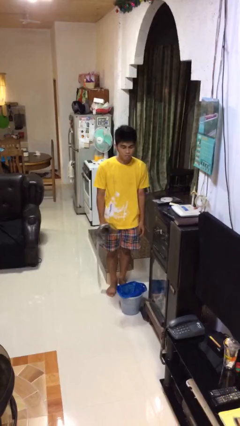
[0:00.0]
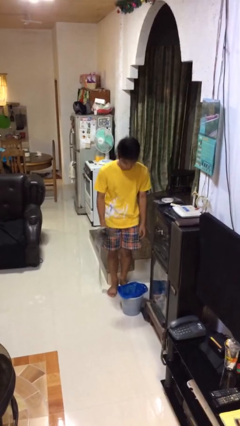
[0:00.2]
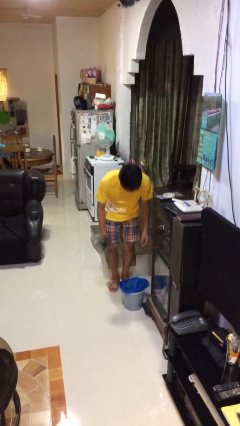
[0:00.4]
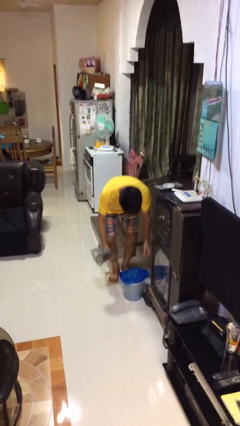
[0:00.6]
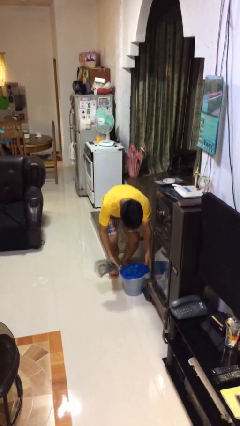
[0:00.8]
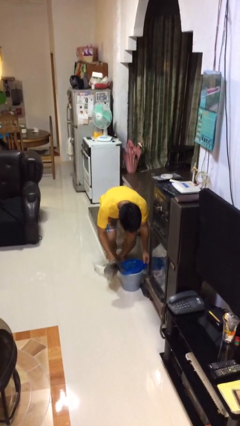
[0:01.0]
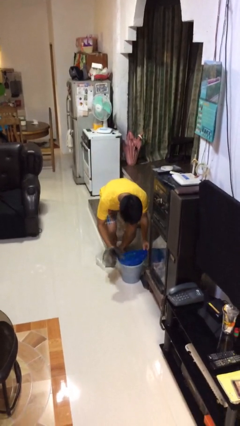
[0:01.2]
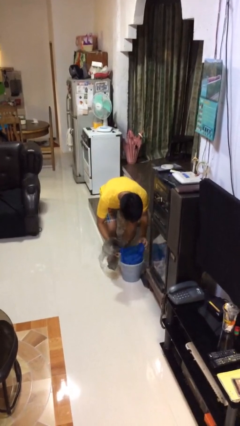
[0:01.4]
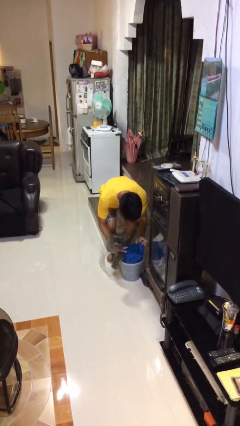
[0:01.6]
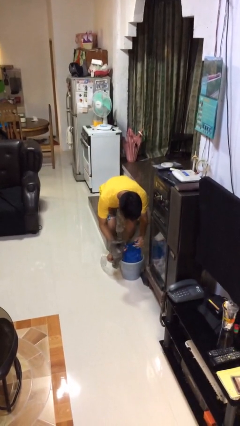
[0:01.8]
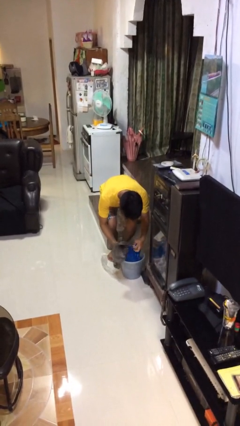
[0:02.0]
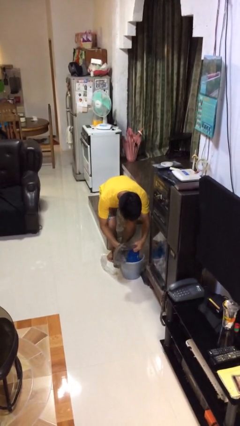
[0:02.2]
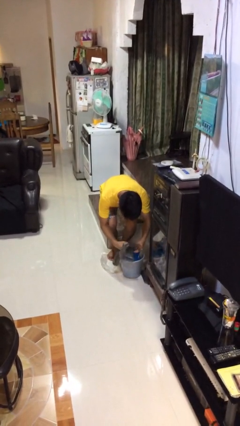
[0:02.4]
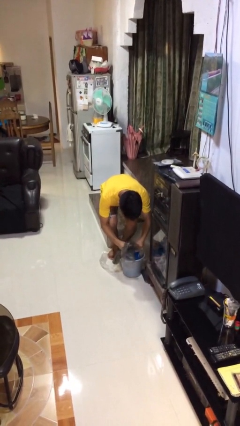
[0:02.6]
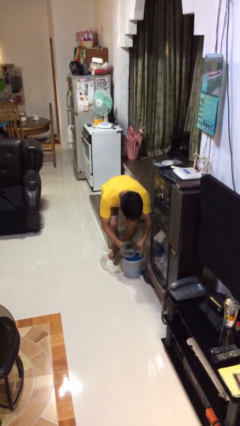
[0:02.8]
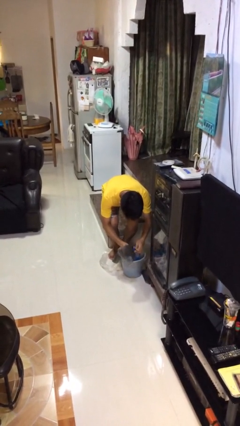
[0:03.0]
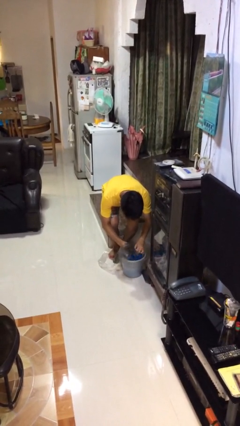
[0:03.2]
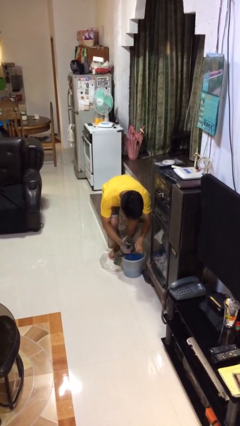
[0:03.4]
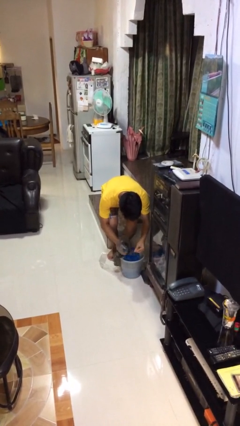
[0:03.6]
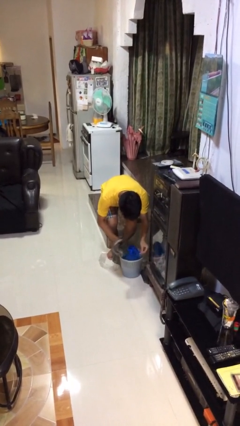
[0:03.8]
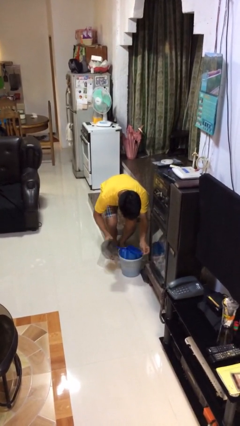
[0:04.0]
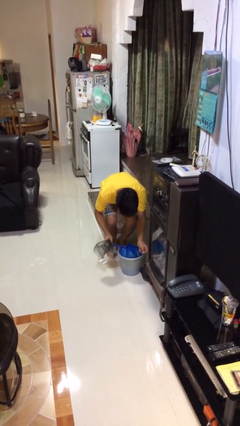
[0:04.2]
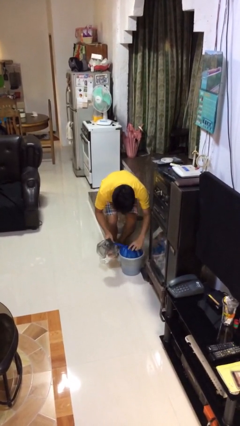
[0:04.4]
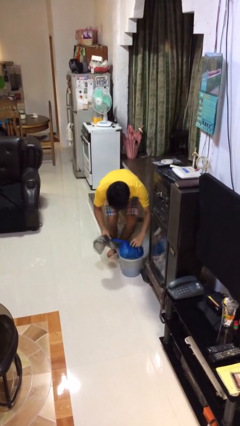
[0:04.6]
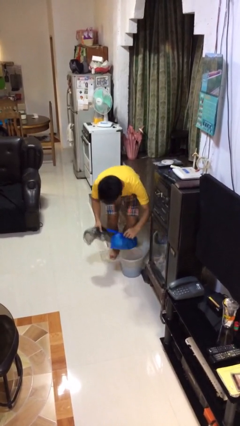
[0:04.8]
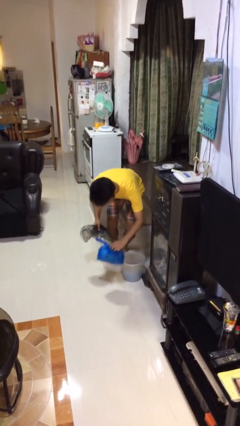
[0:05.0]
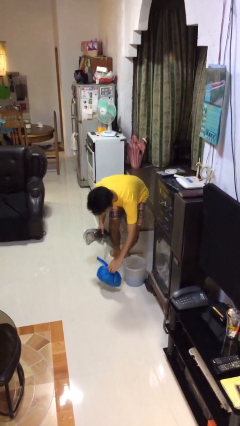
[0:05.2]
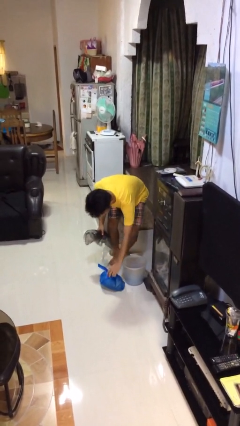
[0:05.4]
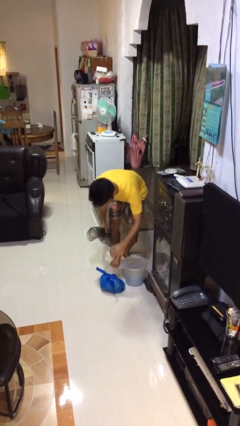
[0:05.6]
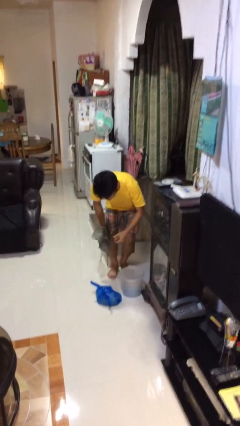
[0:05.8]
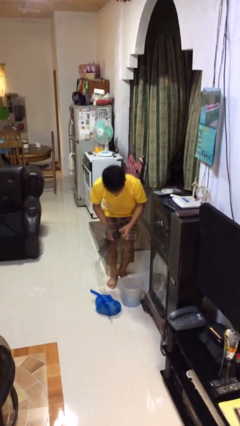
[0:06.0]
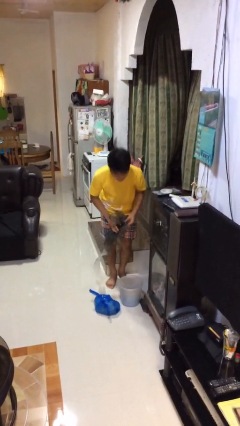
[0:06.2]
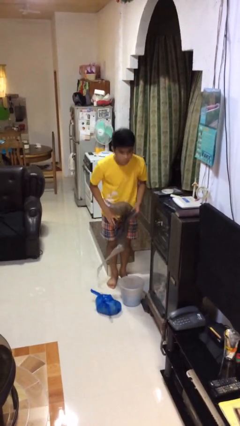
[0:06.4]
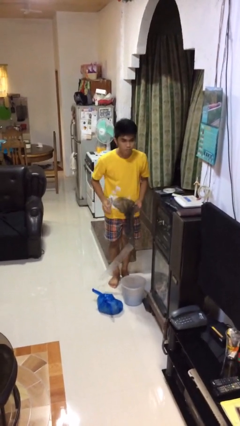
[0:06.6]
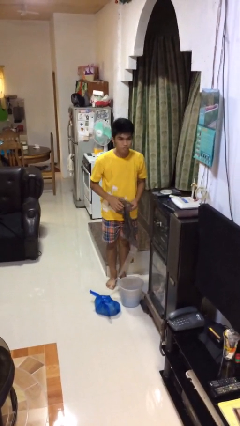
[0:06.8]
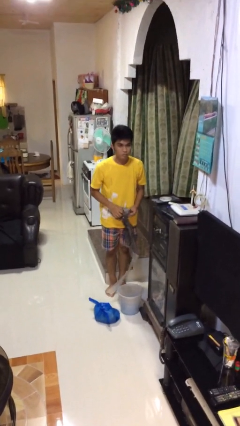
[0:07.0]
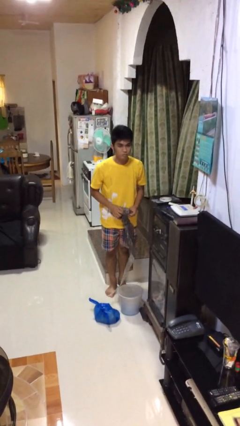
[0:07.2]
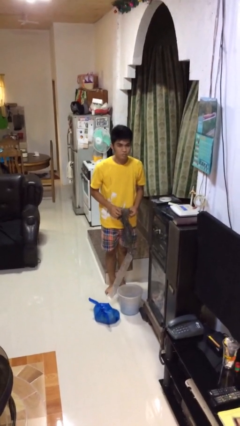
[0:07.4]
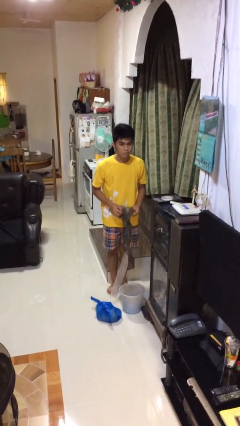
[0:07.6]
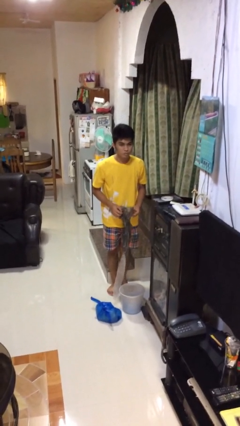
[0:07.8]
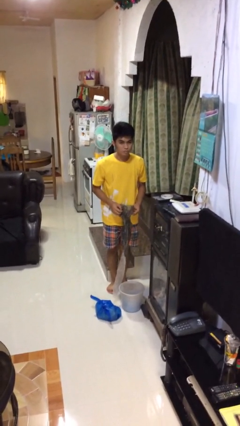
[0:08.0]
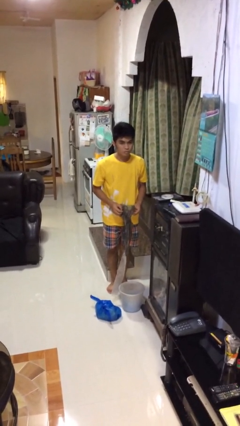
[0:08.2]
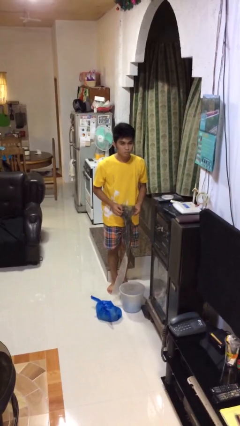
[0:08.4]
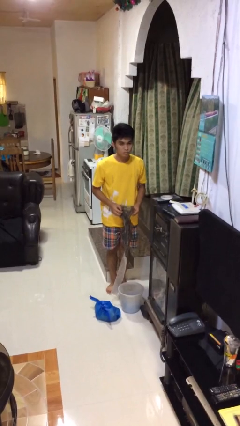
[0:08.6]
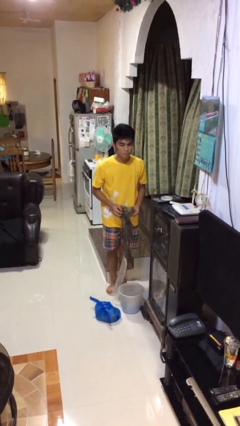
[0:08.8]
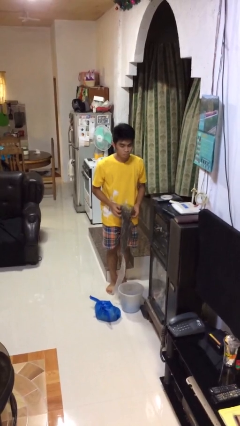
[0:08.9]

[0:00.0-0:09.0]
person removes trashbag from trashcan

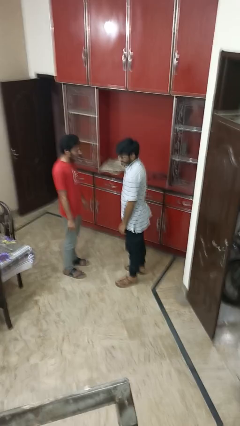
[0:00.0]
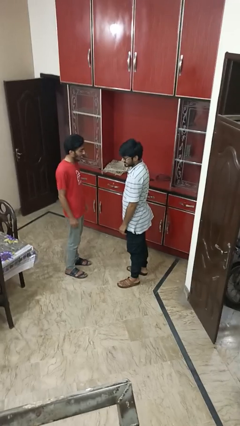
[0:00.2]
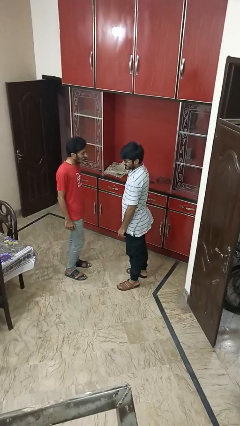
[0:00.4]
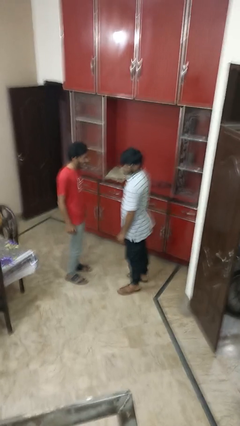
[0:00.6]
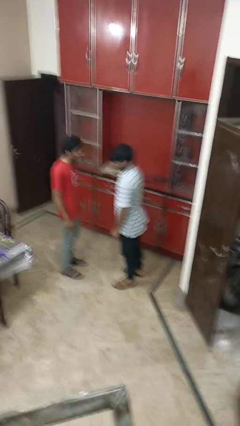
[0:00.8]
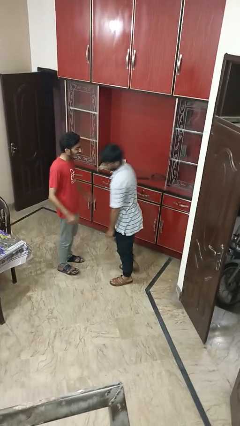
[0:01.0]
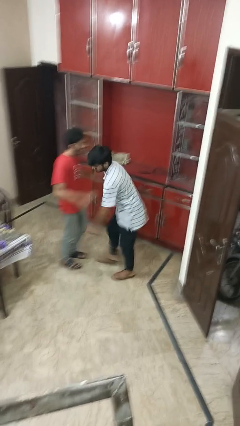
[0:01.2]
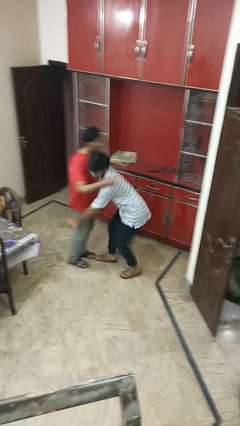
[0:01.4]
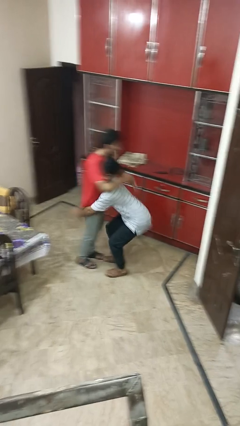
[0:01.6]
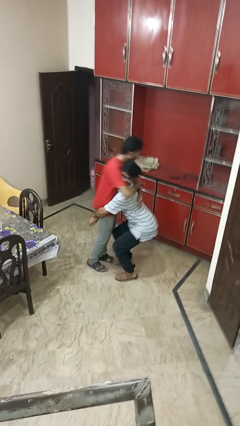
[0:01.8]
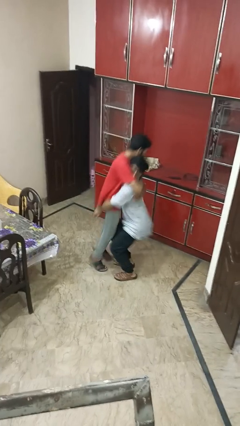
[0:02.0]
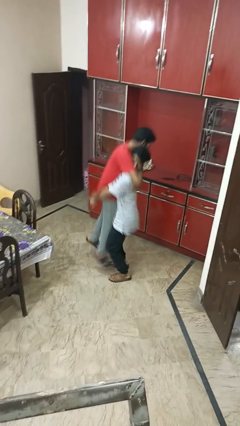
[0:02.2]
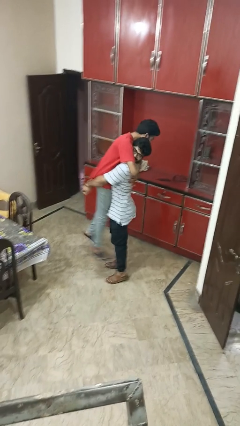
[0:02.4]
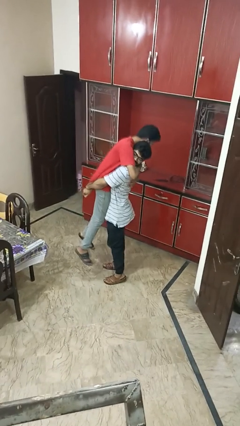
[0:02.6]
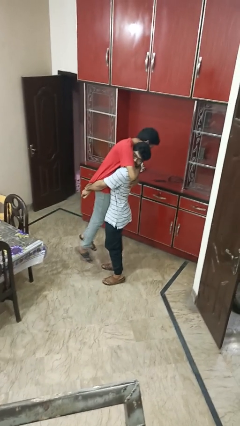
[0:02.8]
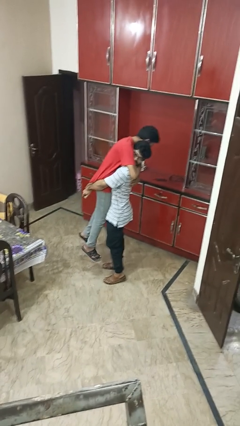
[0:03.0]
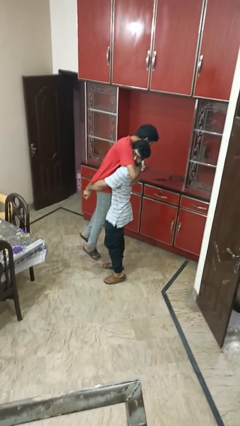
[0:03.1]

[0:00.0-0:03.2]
person picks up person

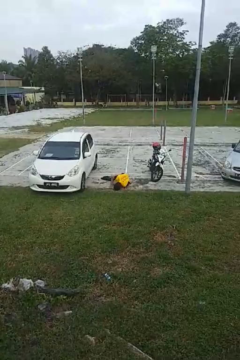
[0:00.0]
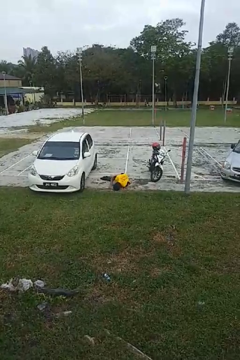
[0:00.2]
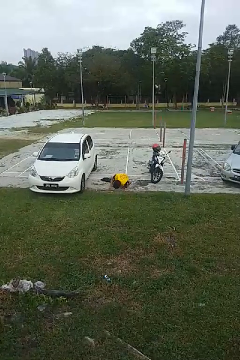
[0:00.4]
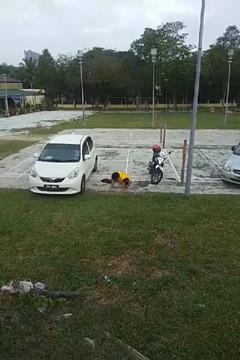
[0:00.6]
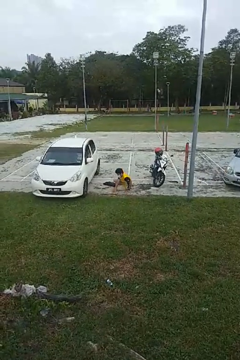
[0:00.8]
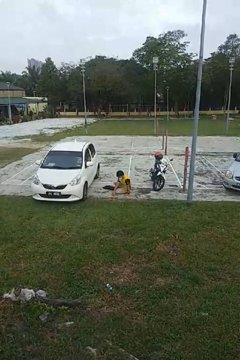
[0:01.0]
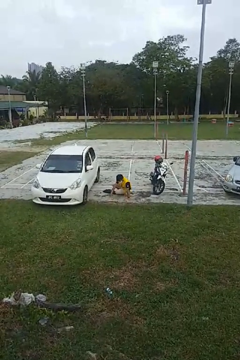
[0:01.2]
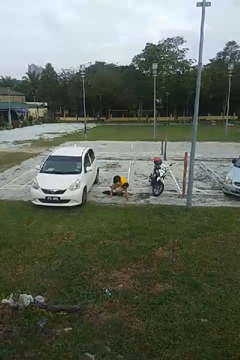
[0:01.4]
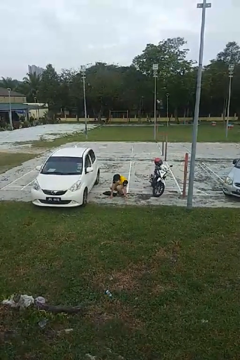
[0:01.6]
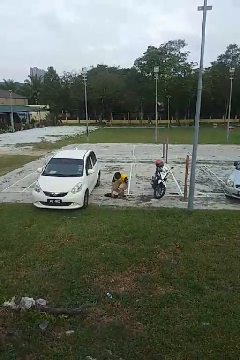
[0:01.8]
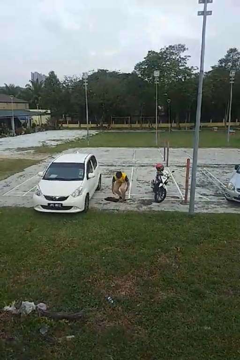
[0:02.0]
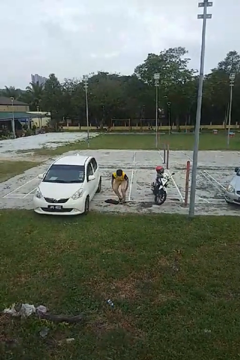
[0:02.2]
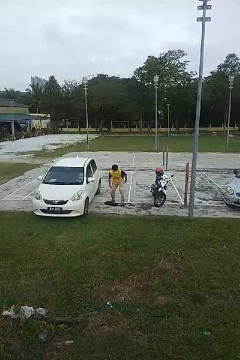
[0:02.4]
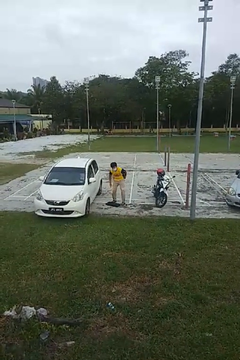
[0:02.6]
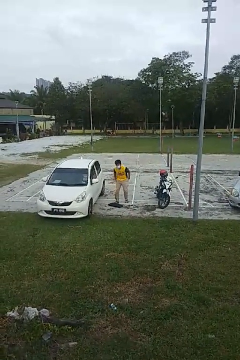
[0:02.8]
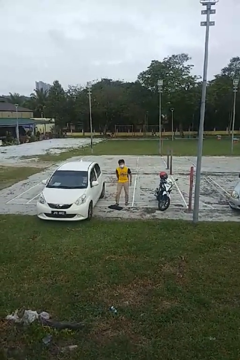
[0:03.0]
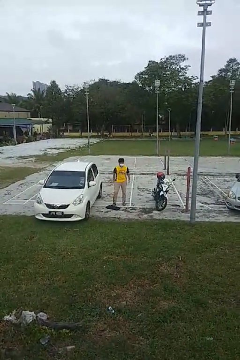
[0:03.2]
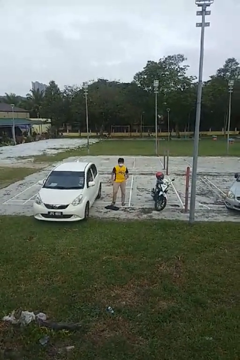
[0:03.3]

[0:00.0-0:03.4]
person stands up from floor

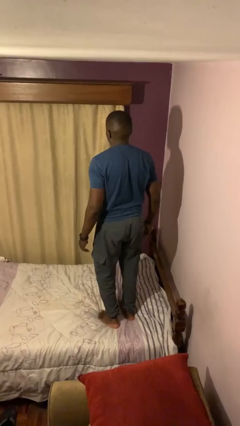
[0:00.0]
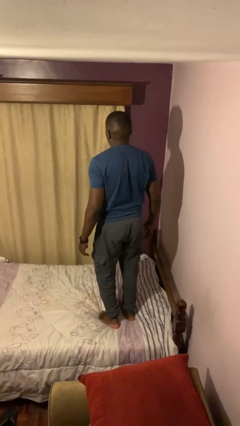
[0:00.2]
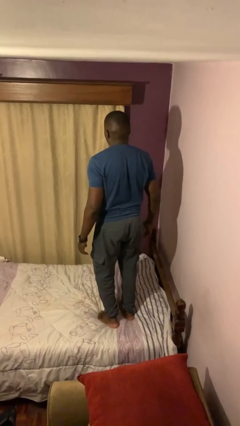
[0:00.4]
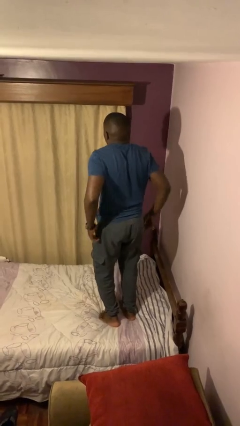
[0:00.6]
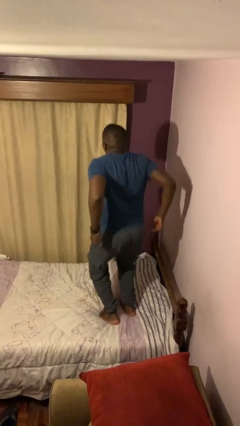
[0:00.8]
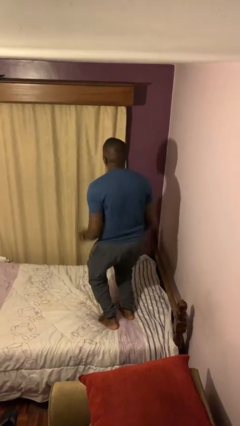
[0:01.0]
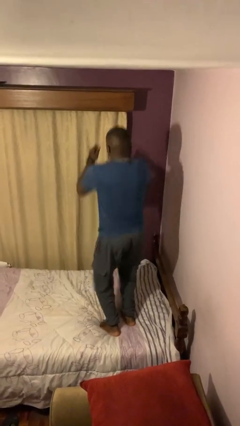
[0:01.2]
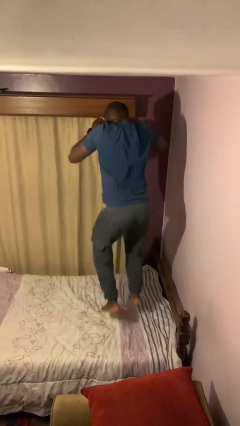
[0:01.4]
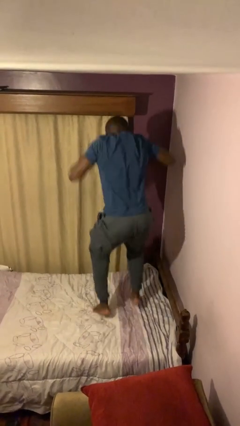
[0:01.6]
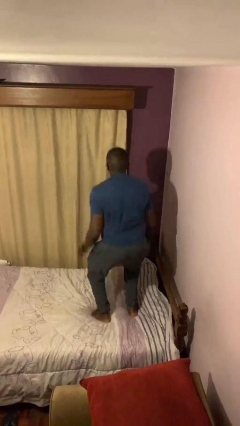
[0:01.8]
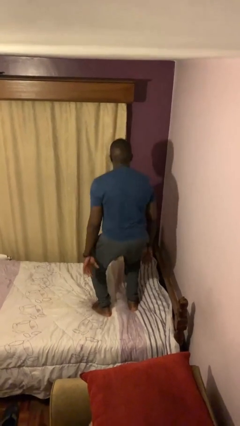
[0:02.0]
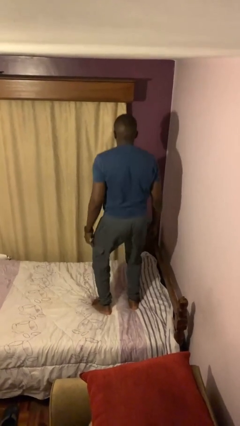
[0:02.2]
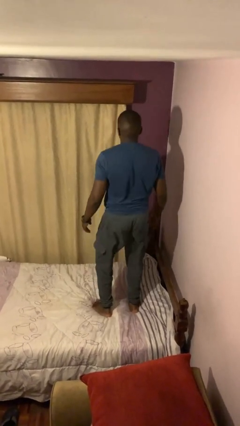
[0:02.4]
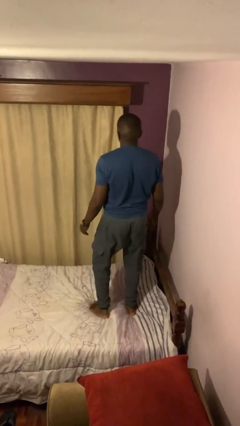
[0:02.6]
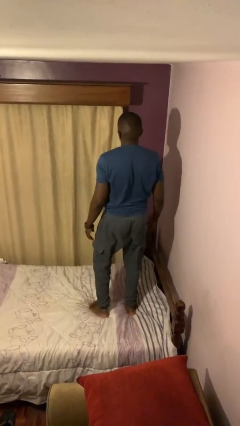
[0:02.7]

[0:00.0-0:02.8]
person jumps on bed
